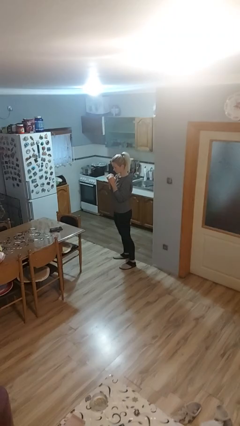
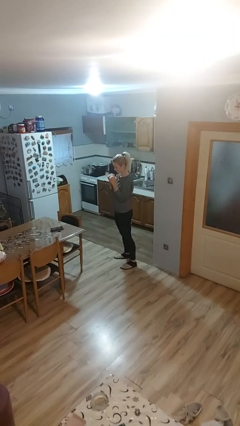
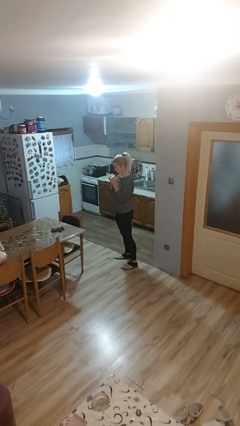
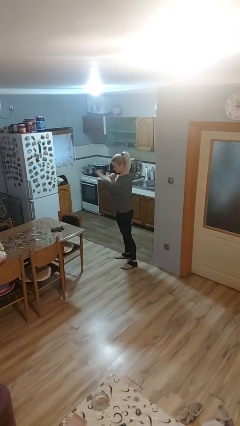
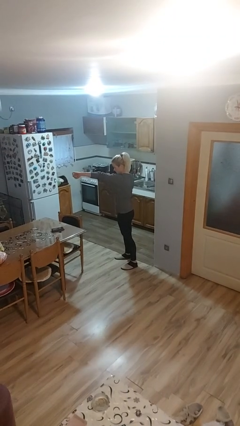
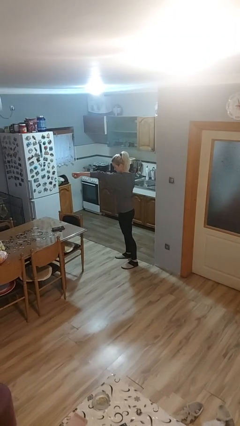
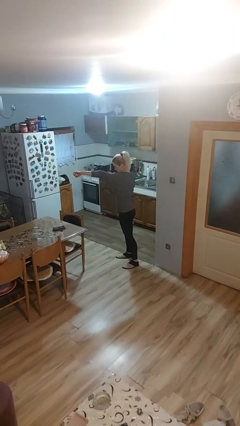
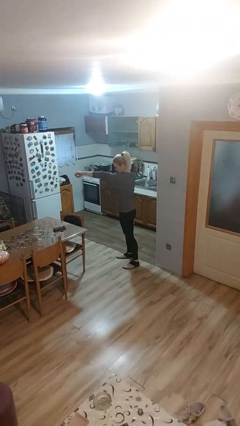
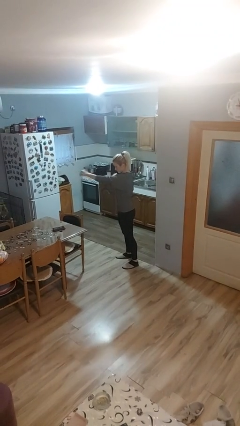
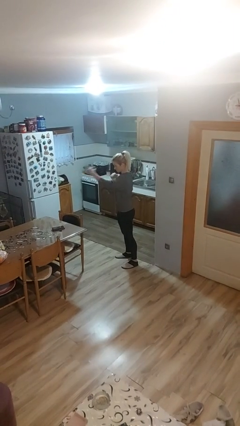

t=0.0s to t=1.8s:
person punches

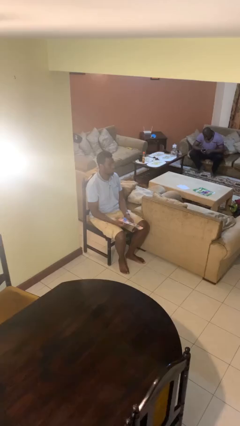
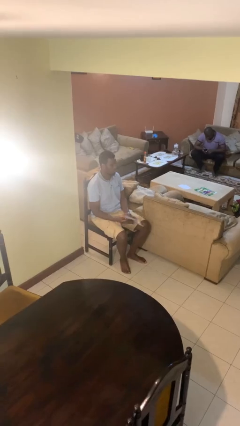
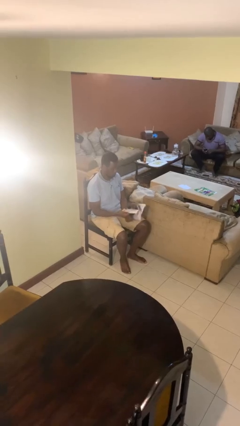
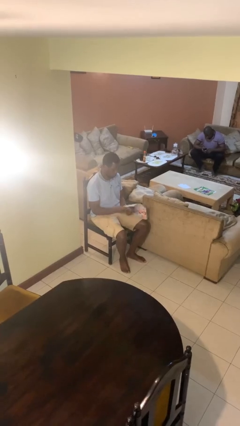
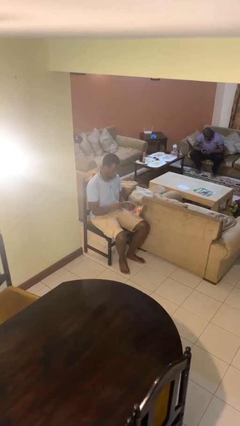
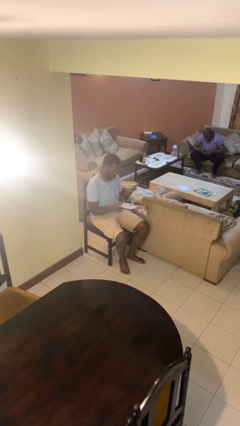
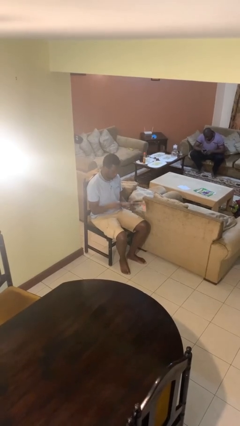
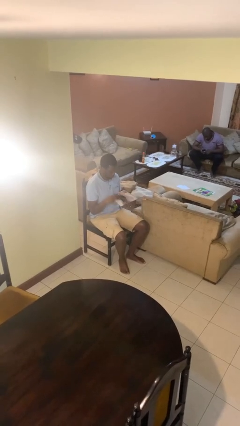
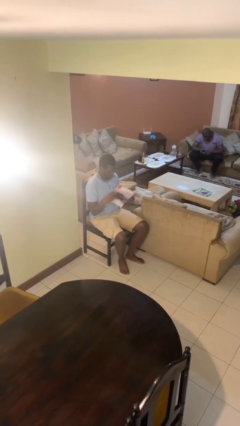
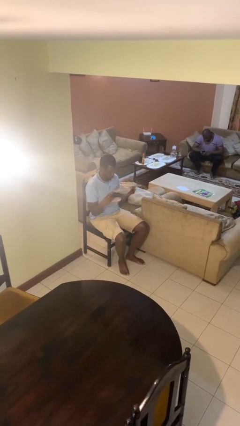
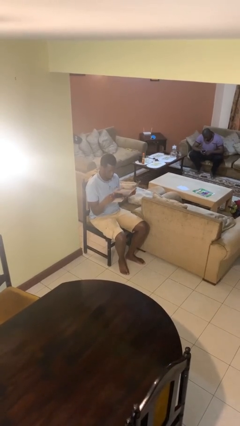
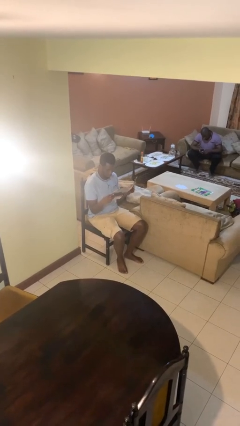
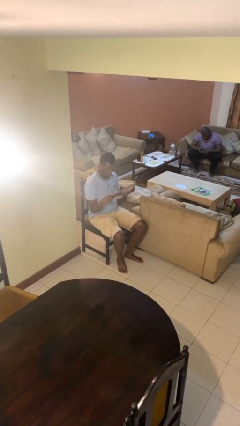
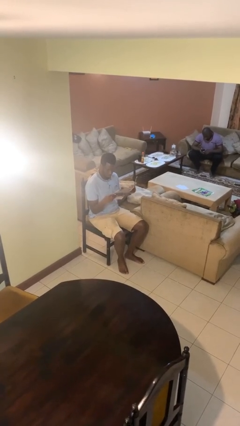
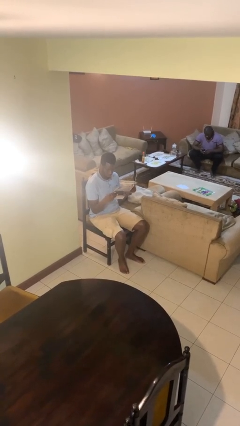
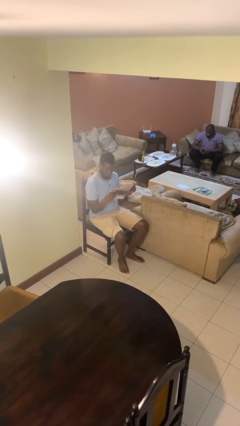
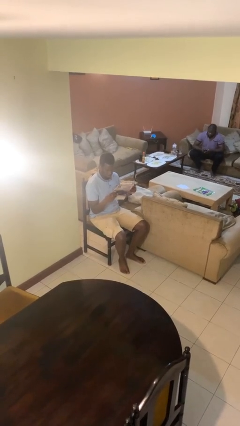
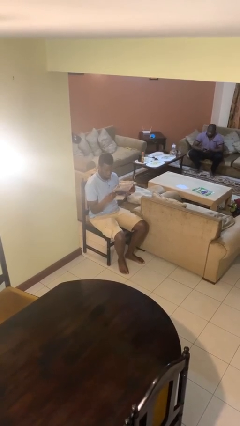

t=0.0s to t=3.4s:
person reads document

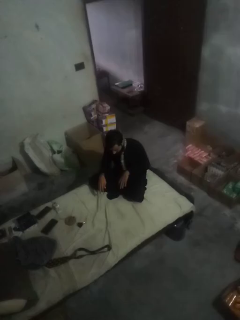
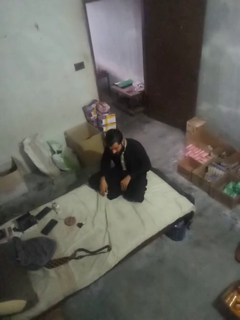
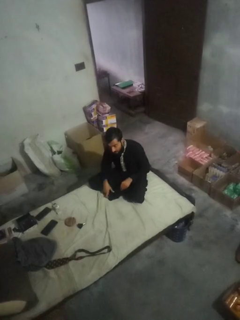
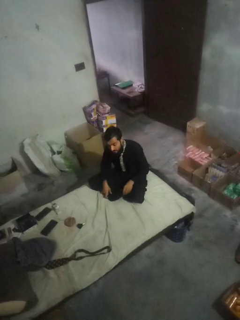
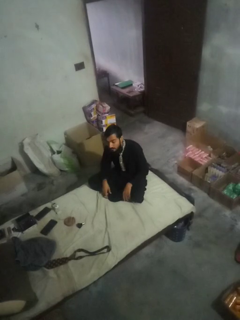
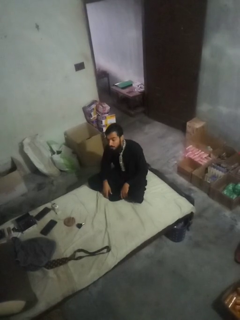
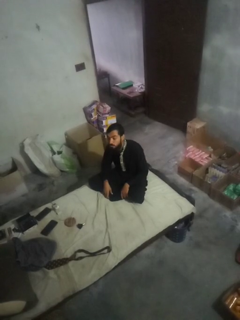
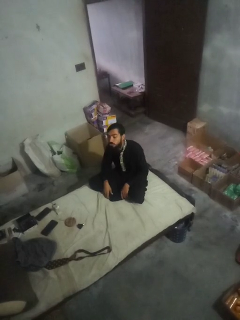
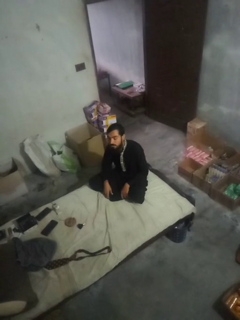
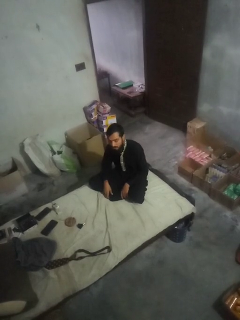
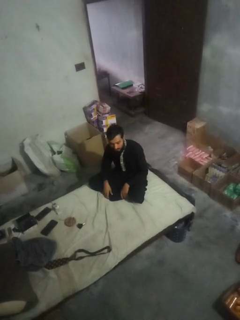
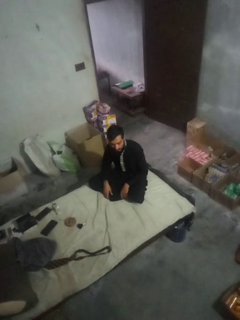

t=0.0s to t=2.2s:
person gestures blow kiss

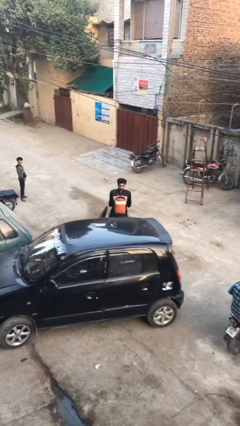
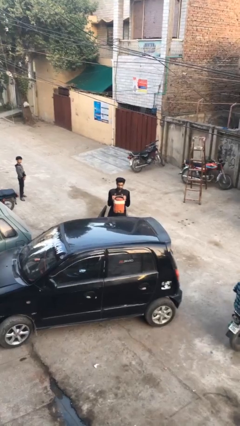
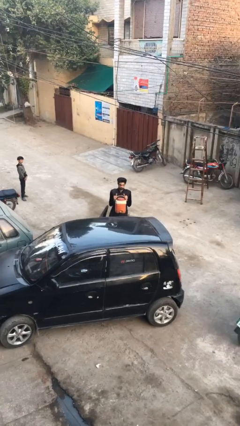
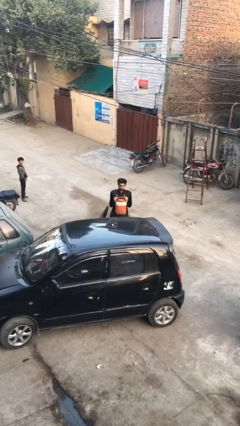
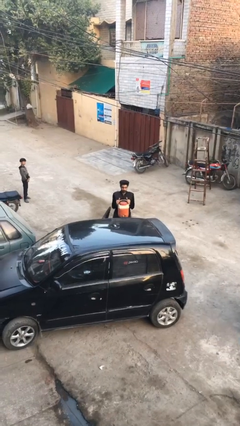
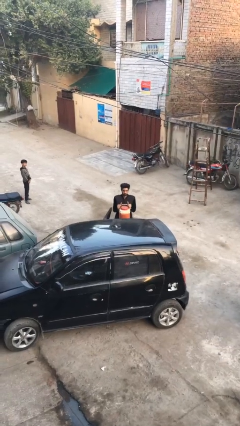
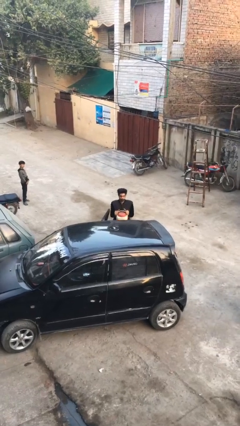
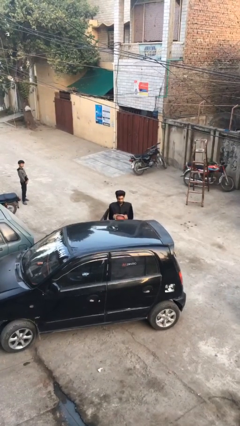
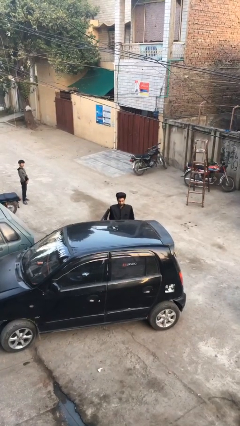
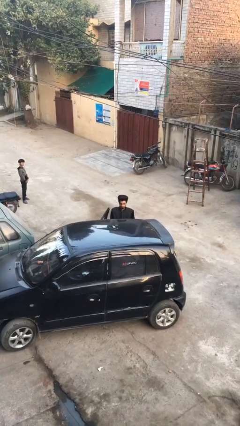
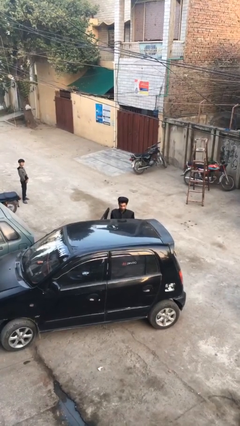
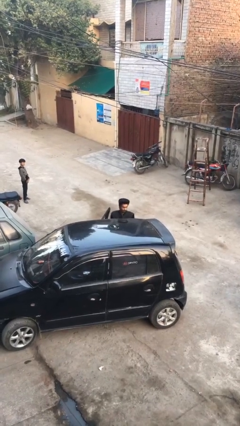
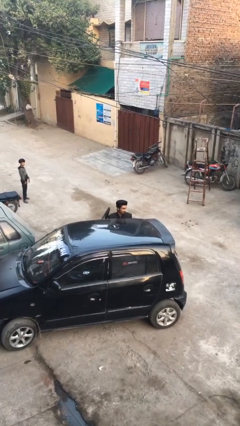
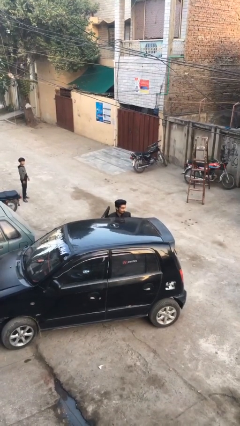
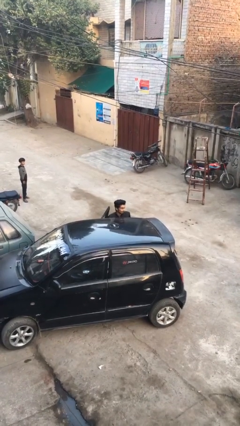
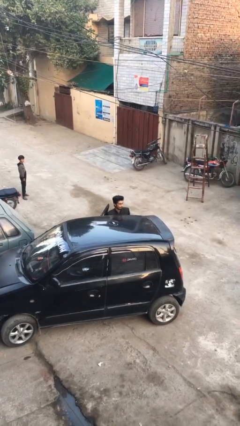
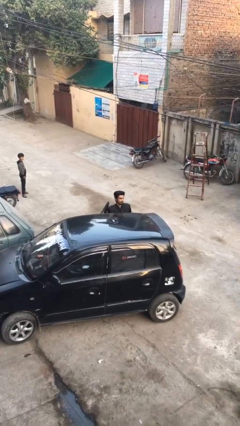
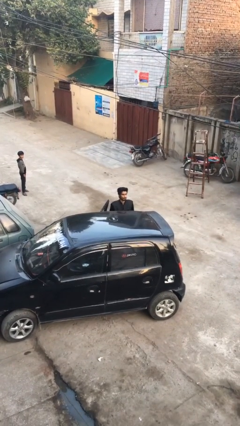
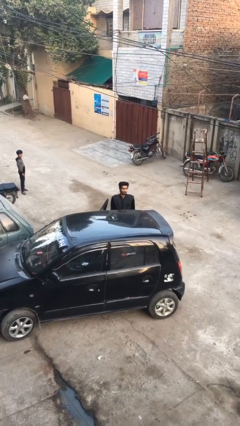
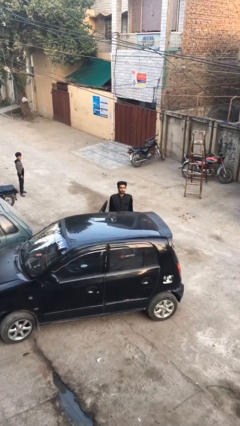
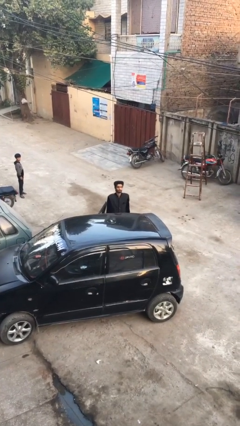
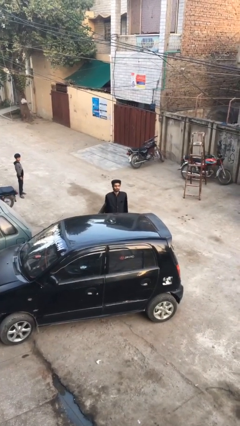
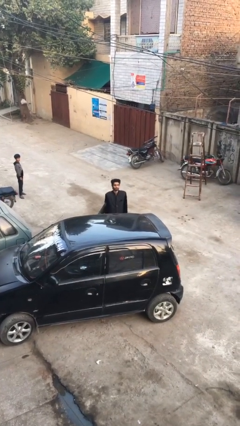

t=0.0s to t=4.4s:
person loads car

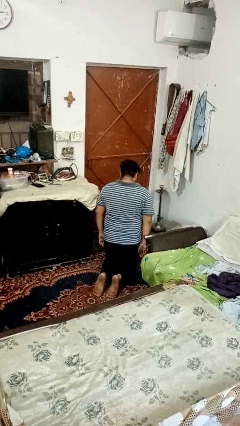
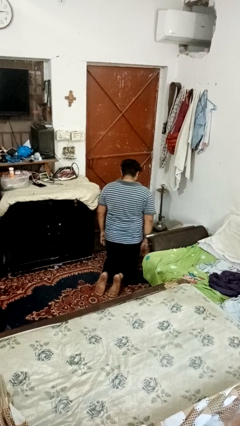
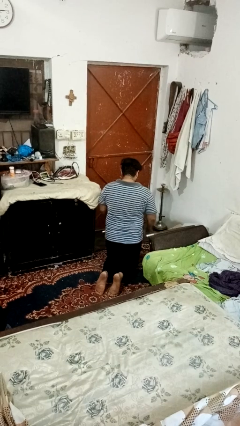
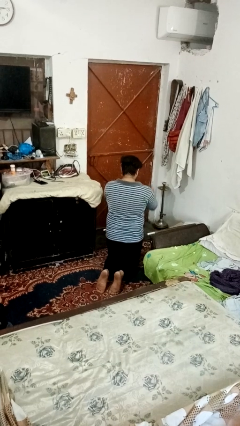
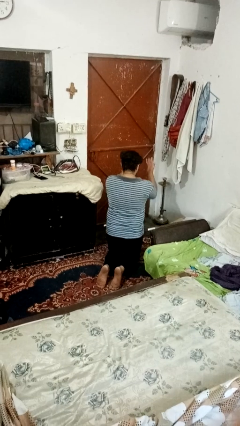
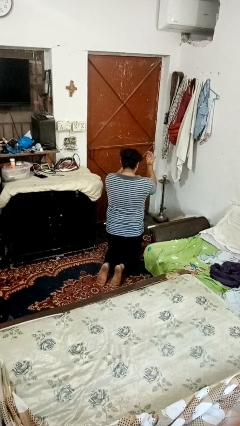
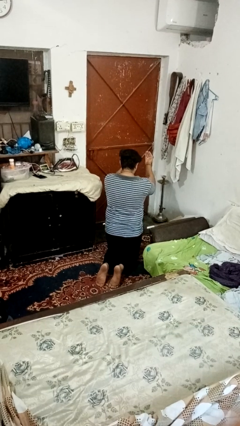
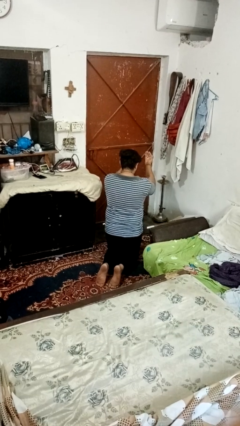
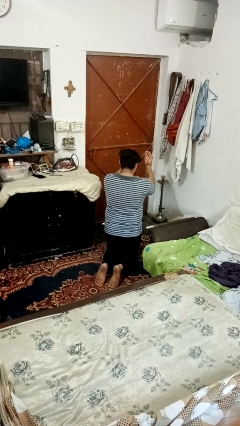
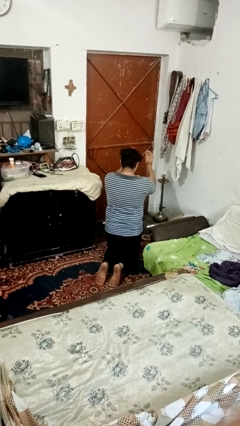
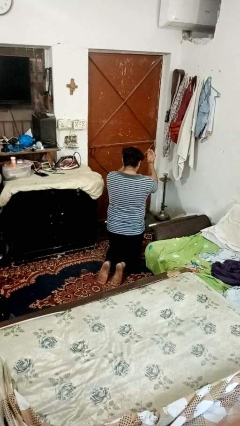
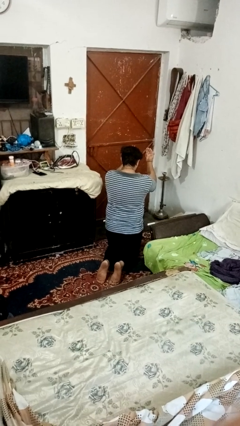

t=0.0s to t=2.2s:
person prays

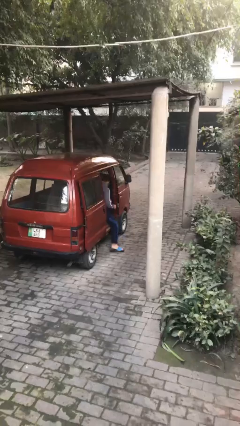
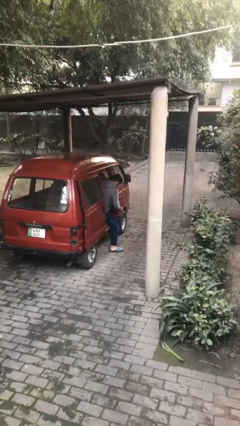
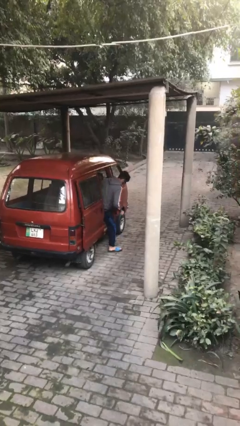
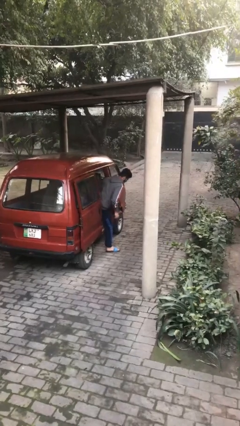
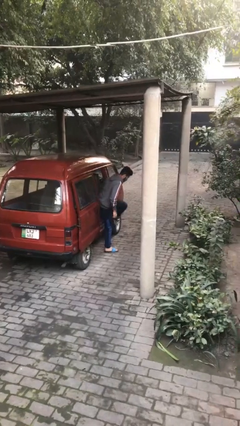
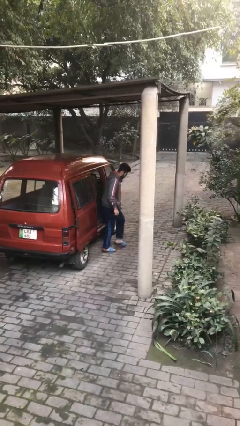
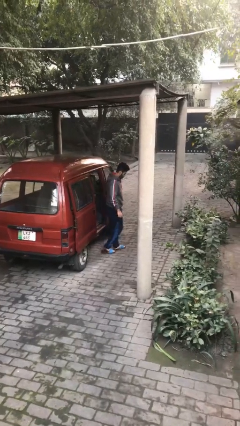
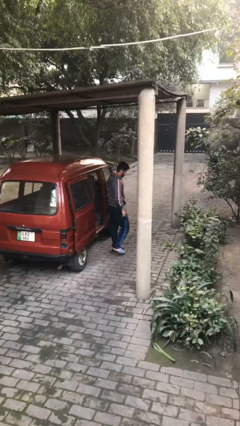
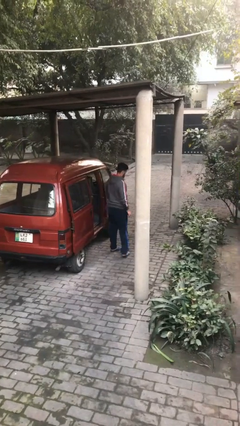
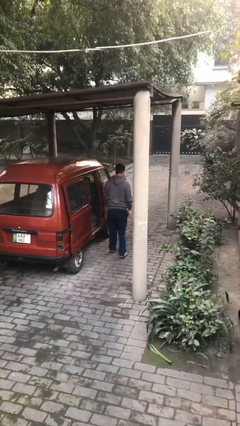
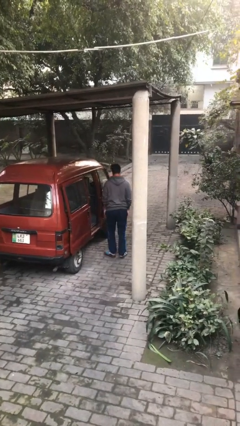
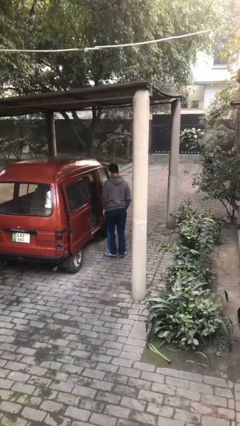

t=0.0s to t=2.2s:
person exits car

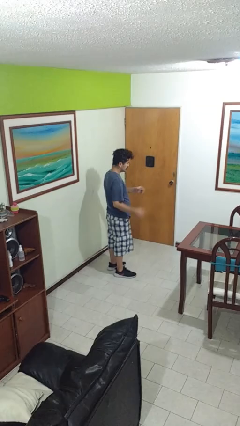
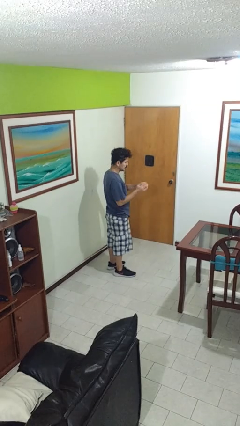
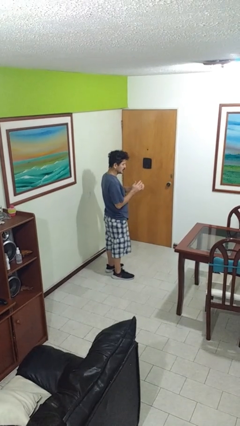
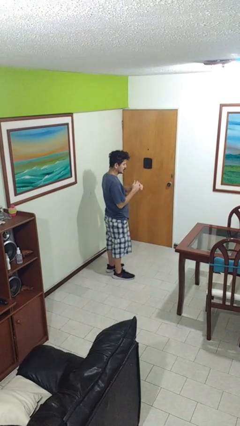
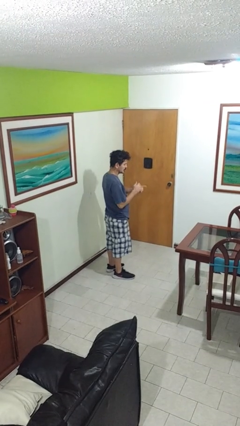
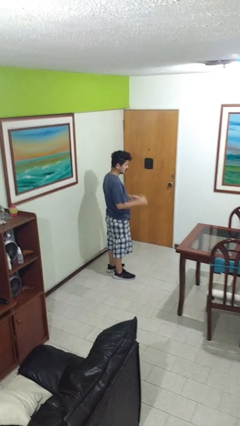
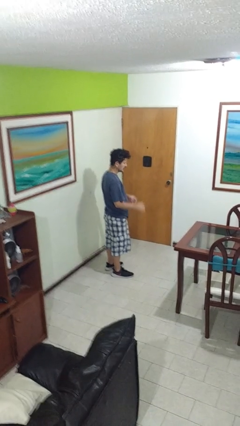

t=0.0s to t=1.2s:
person puts on ring
